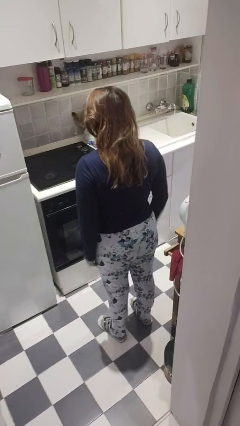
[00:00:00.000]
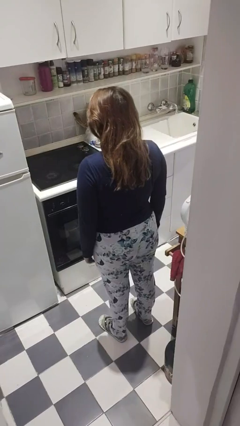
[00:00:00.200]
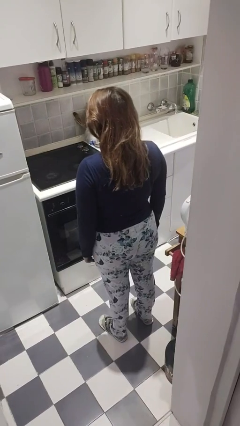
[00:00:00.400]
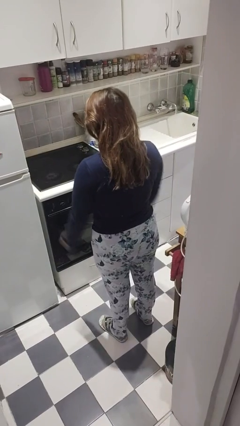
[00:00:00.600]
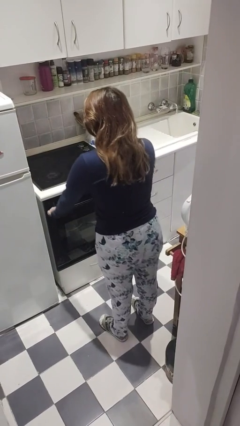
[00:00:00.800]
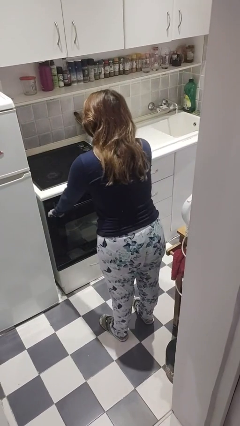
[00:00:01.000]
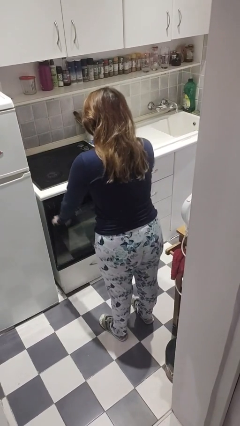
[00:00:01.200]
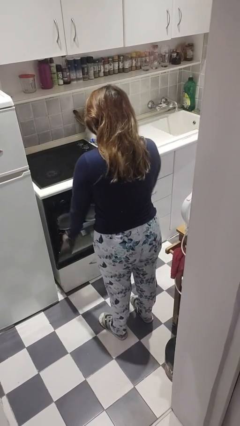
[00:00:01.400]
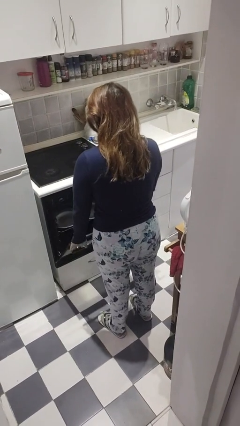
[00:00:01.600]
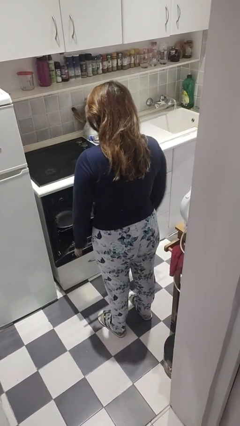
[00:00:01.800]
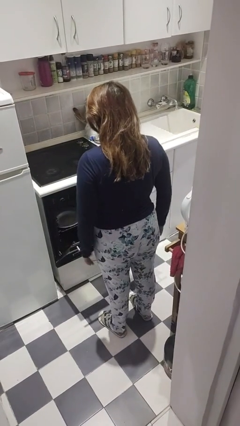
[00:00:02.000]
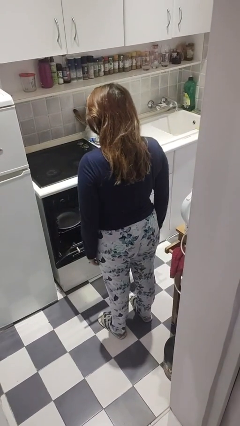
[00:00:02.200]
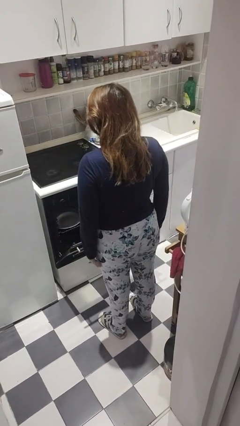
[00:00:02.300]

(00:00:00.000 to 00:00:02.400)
person opens dishwasher

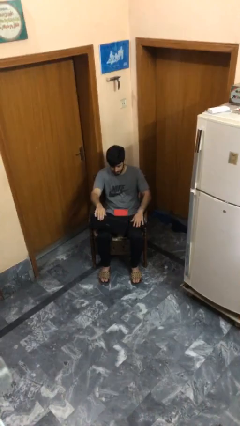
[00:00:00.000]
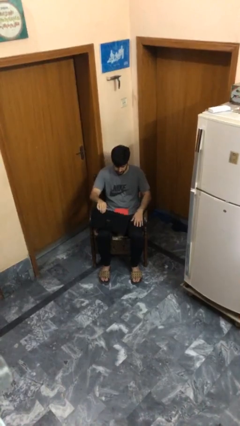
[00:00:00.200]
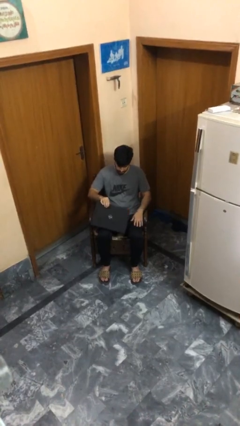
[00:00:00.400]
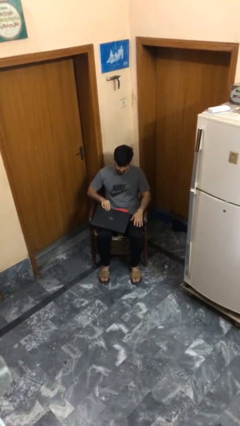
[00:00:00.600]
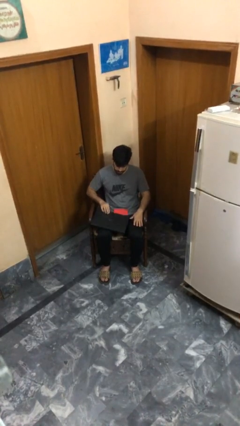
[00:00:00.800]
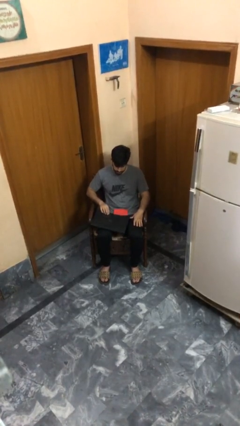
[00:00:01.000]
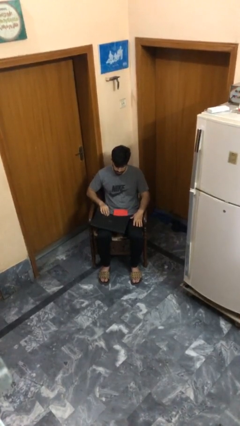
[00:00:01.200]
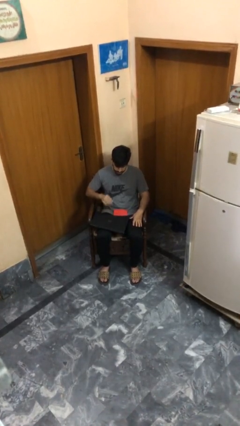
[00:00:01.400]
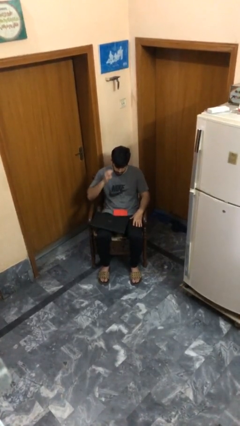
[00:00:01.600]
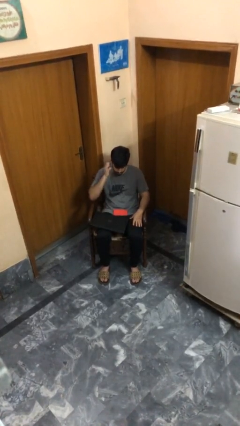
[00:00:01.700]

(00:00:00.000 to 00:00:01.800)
person closes laptop

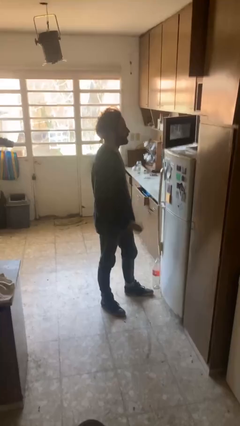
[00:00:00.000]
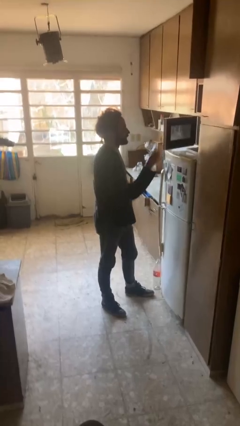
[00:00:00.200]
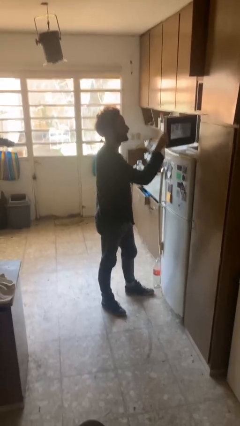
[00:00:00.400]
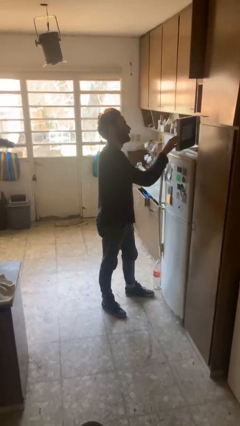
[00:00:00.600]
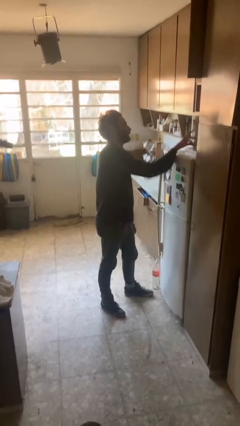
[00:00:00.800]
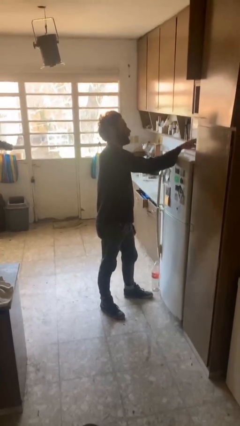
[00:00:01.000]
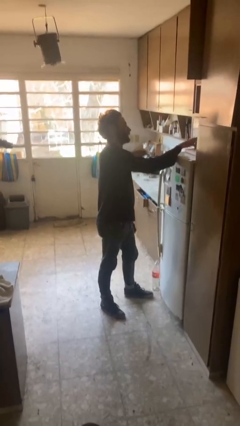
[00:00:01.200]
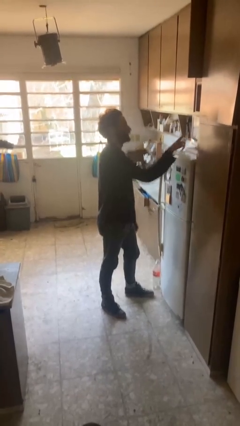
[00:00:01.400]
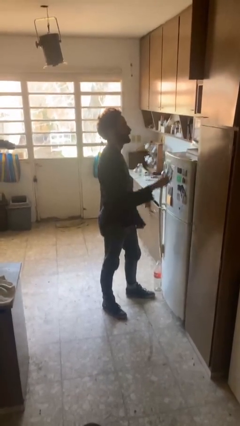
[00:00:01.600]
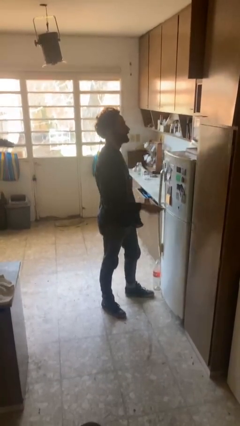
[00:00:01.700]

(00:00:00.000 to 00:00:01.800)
person closes microwave

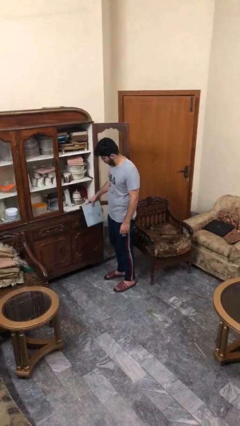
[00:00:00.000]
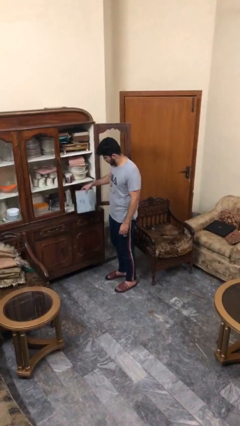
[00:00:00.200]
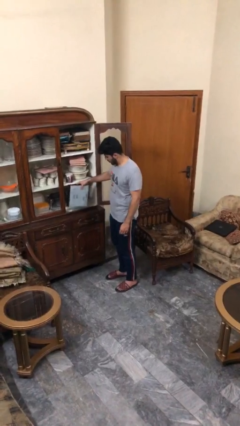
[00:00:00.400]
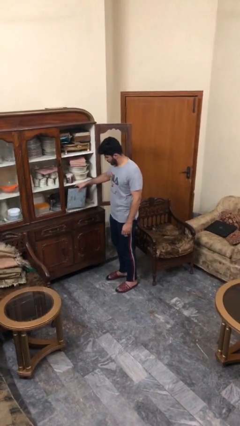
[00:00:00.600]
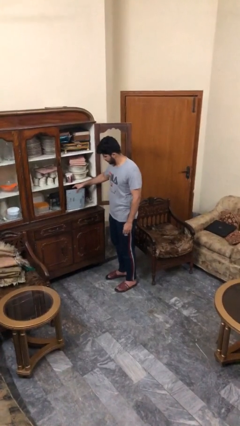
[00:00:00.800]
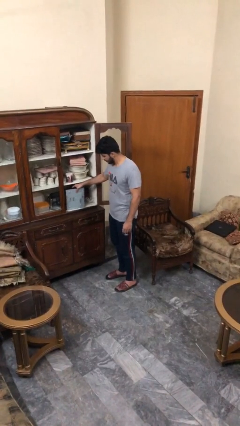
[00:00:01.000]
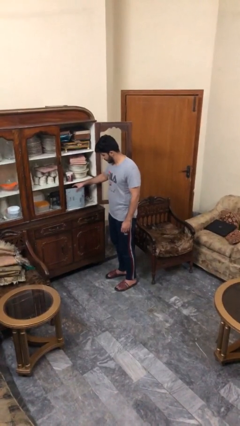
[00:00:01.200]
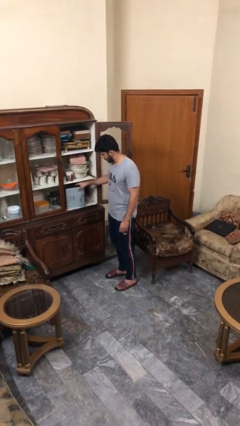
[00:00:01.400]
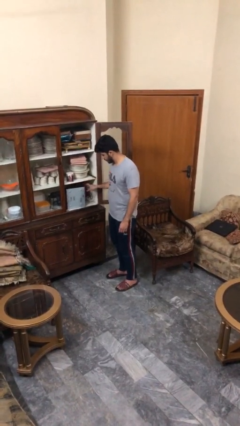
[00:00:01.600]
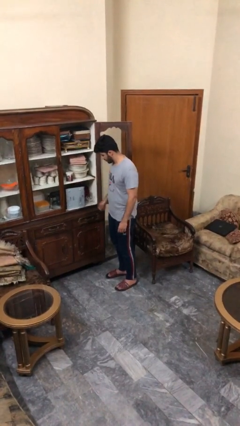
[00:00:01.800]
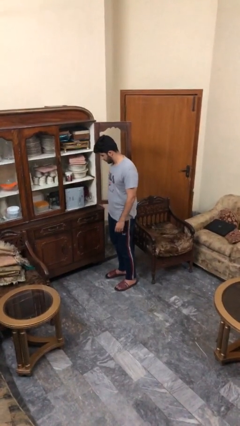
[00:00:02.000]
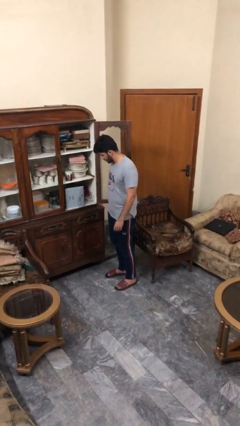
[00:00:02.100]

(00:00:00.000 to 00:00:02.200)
person puts down object into cabinet

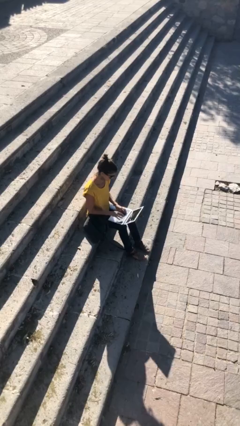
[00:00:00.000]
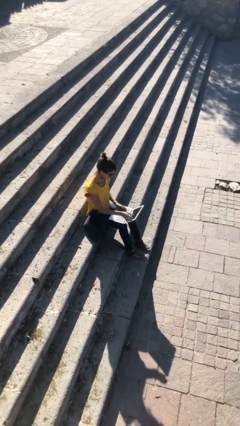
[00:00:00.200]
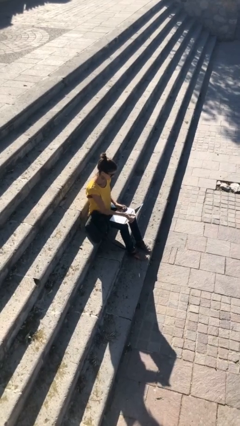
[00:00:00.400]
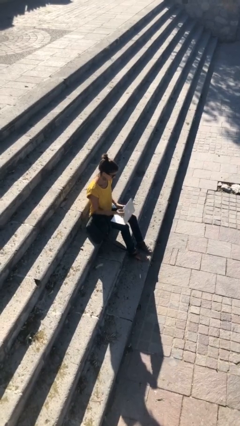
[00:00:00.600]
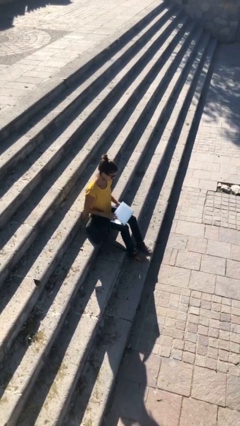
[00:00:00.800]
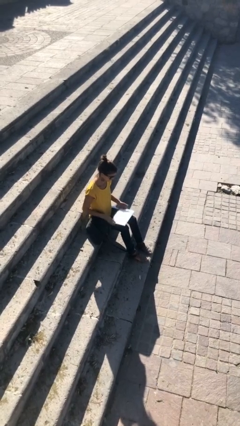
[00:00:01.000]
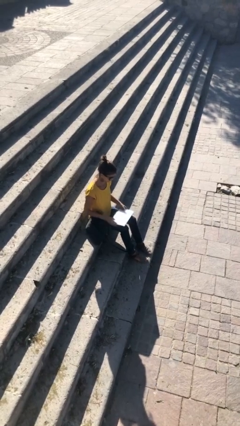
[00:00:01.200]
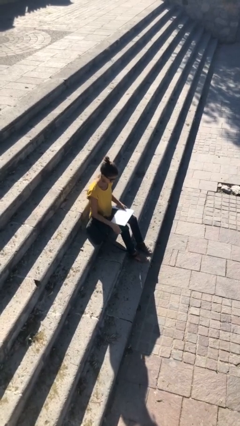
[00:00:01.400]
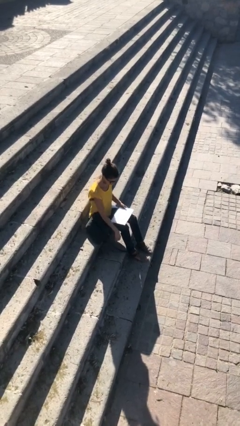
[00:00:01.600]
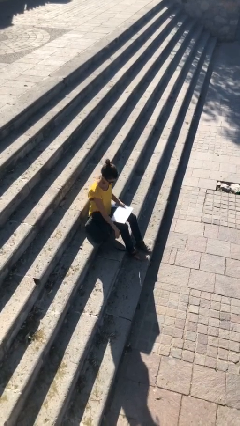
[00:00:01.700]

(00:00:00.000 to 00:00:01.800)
person interacts with laptop

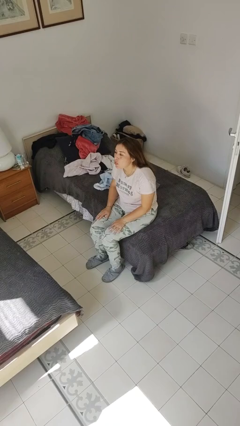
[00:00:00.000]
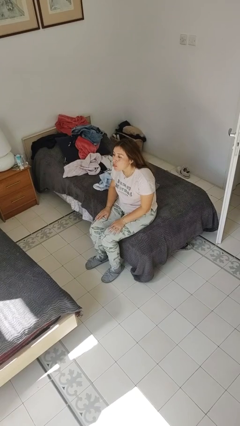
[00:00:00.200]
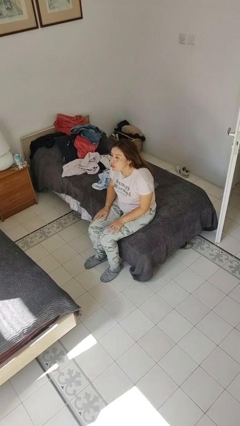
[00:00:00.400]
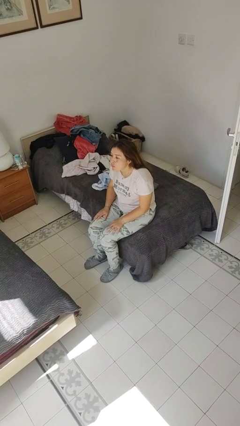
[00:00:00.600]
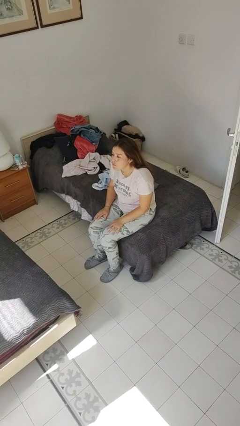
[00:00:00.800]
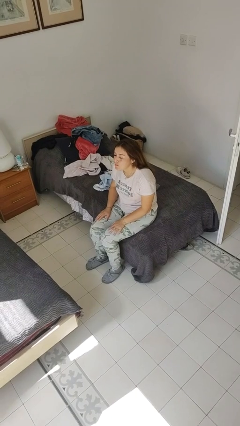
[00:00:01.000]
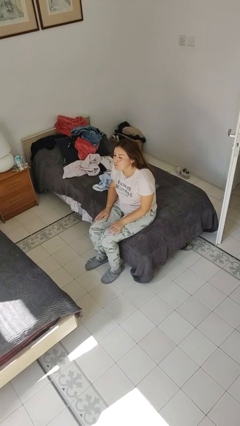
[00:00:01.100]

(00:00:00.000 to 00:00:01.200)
person sticks out tongue

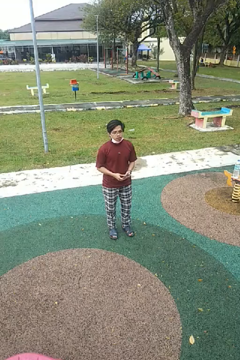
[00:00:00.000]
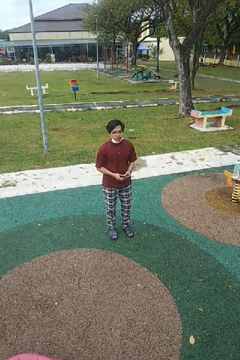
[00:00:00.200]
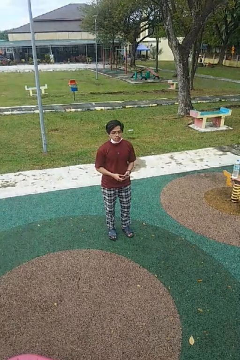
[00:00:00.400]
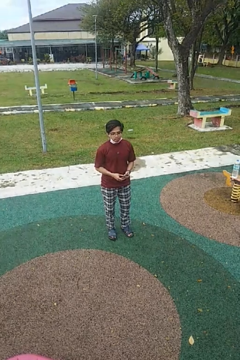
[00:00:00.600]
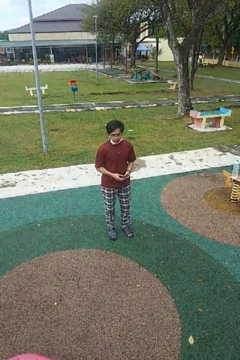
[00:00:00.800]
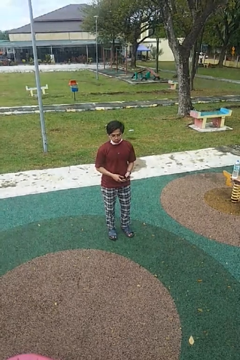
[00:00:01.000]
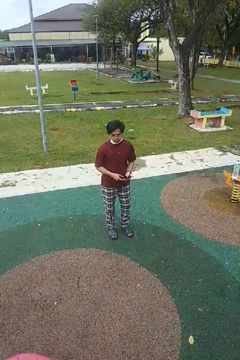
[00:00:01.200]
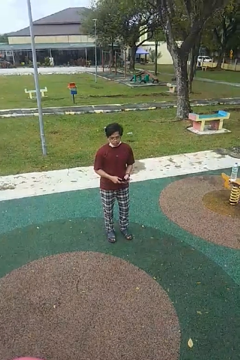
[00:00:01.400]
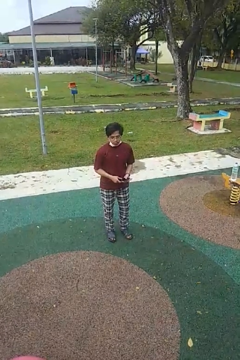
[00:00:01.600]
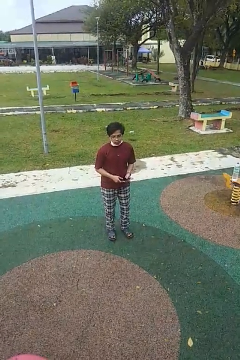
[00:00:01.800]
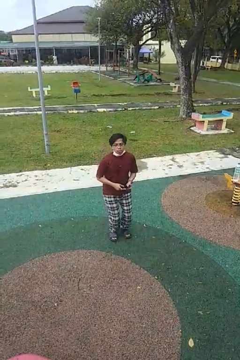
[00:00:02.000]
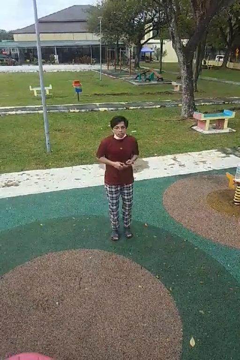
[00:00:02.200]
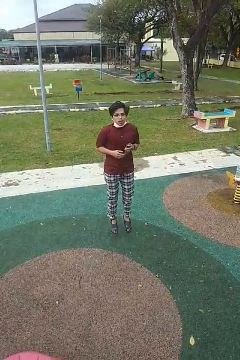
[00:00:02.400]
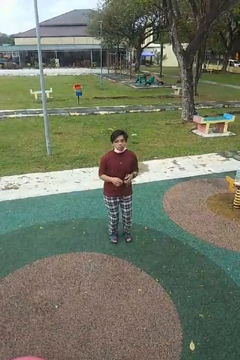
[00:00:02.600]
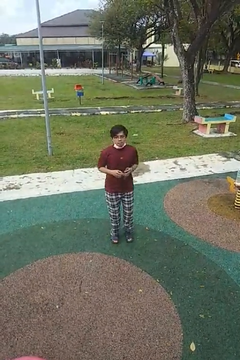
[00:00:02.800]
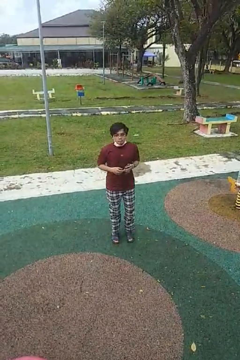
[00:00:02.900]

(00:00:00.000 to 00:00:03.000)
person jumps

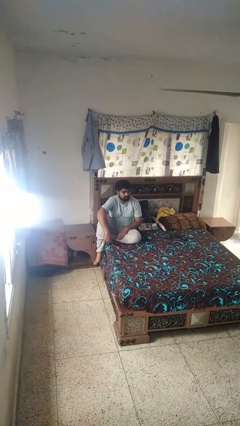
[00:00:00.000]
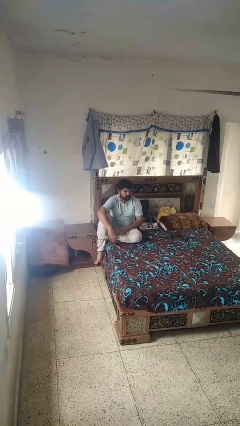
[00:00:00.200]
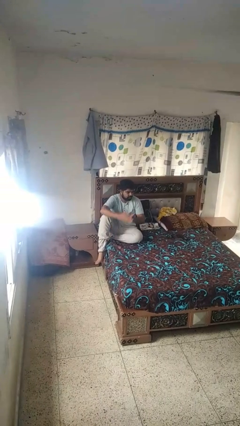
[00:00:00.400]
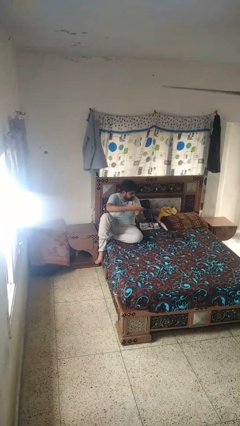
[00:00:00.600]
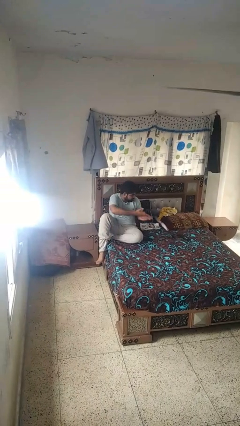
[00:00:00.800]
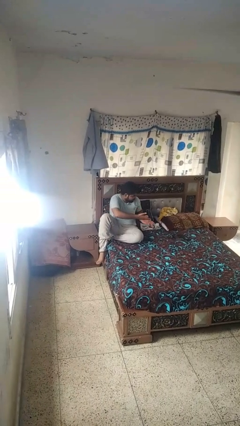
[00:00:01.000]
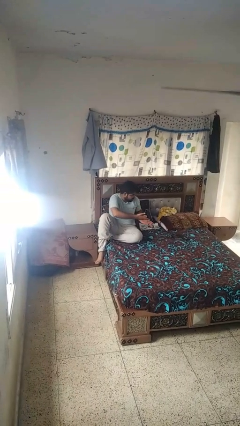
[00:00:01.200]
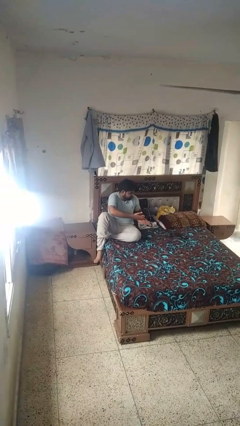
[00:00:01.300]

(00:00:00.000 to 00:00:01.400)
person gestures come here

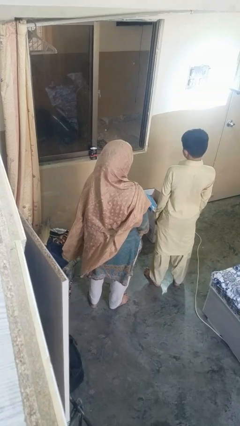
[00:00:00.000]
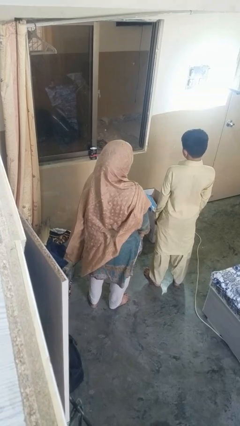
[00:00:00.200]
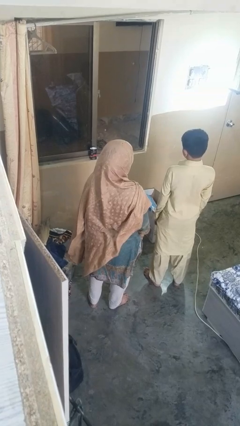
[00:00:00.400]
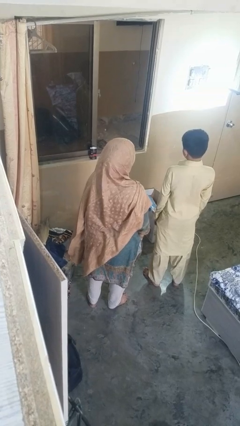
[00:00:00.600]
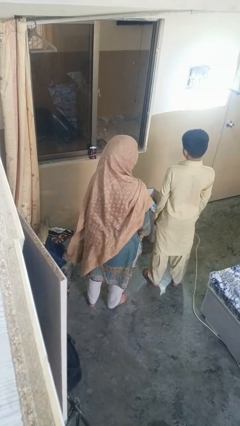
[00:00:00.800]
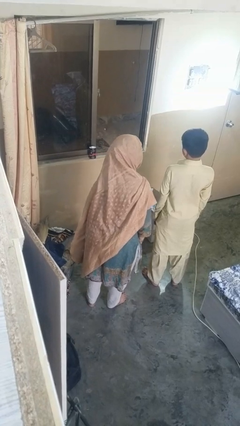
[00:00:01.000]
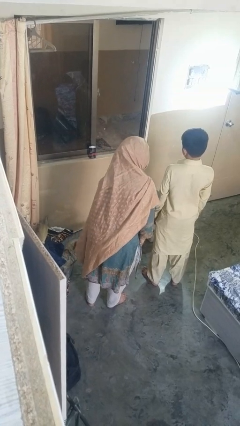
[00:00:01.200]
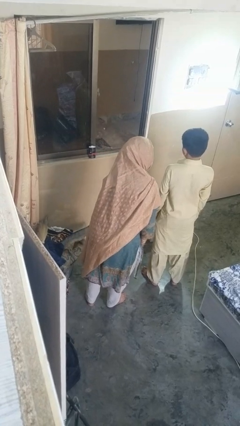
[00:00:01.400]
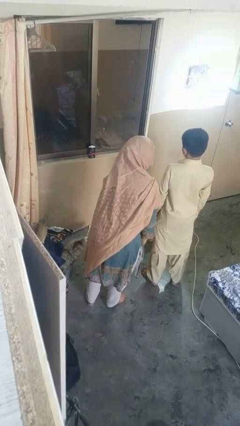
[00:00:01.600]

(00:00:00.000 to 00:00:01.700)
person laughs with person
